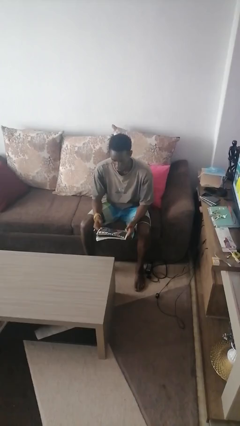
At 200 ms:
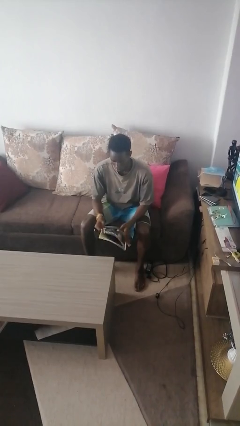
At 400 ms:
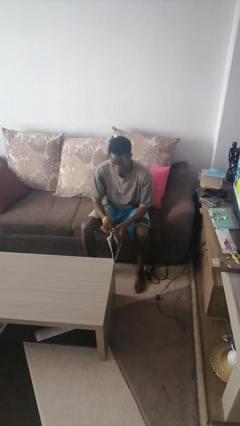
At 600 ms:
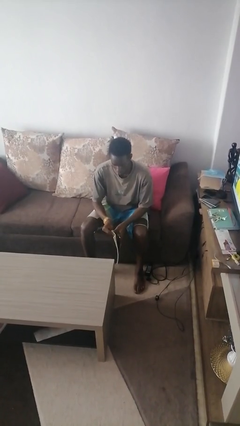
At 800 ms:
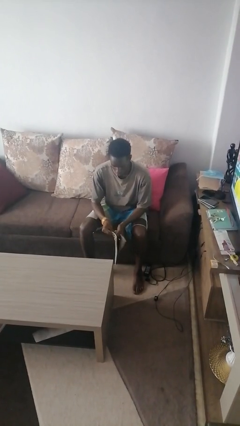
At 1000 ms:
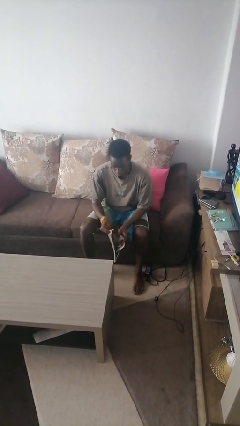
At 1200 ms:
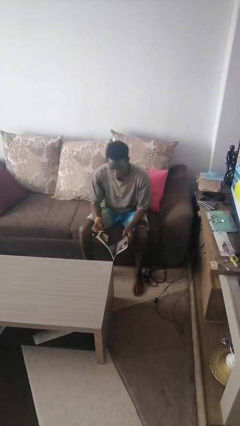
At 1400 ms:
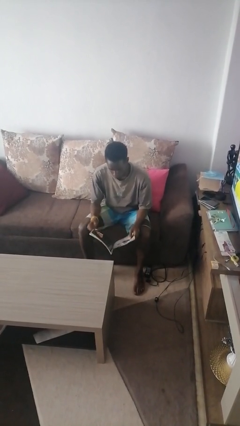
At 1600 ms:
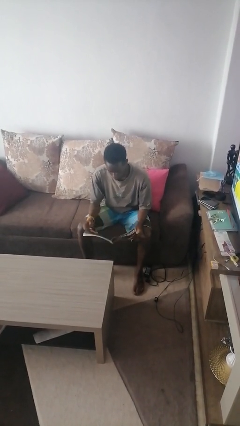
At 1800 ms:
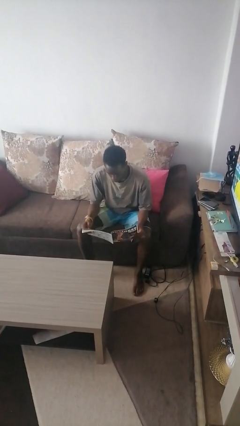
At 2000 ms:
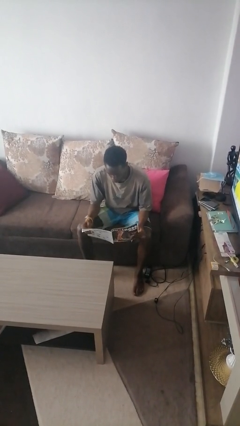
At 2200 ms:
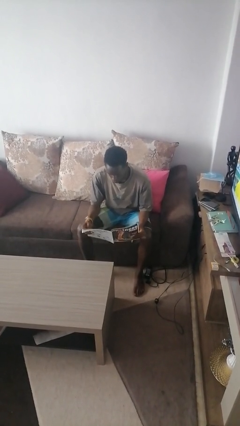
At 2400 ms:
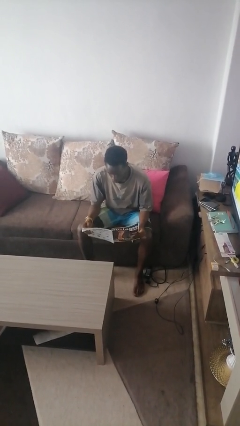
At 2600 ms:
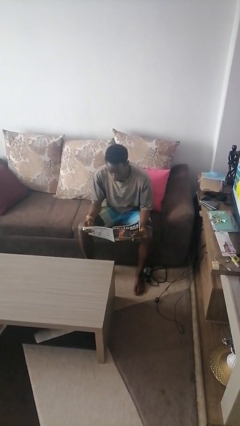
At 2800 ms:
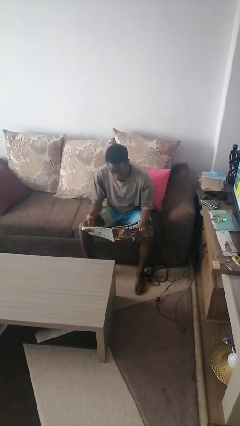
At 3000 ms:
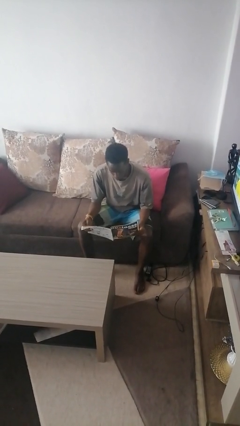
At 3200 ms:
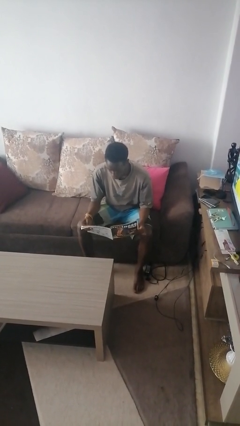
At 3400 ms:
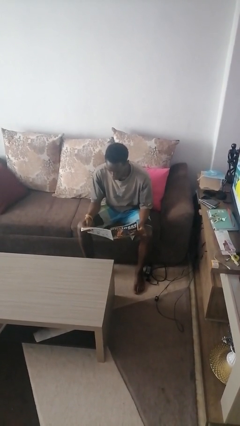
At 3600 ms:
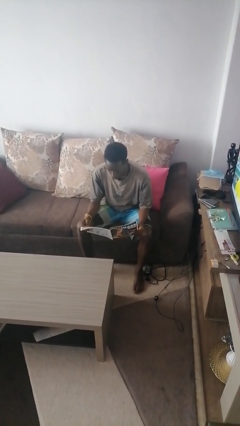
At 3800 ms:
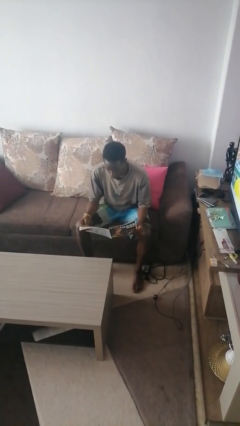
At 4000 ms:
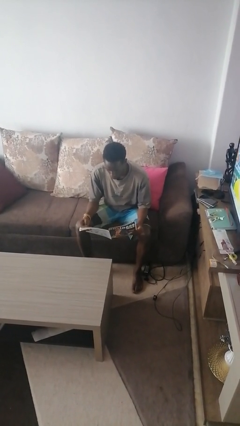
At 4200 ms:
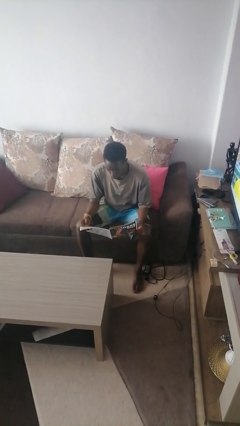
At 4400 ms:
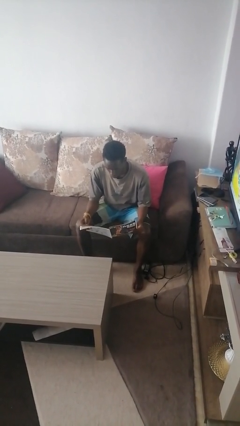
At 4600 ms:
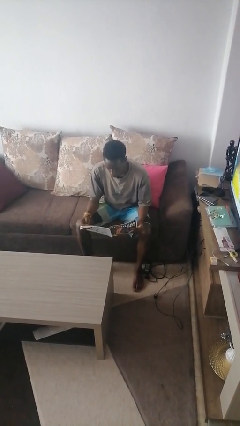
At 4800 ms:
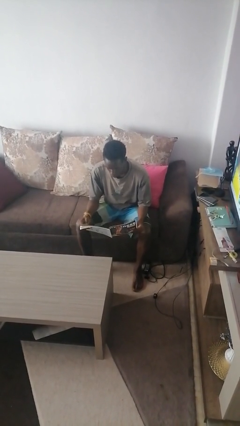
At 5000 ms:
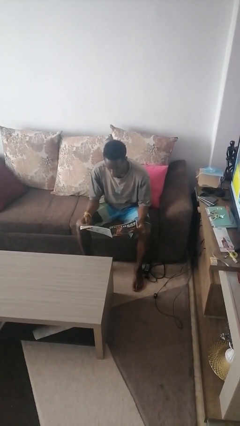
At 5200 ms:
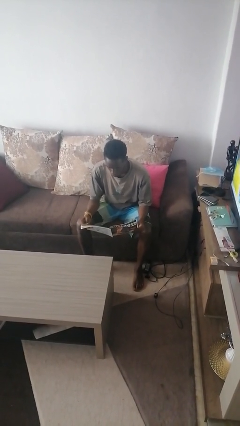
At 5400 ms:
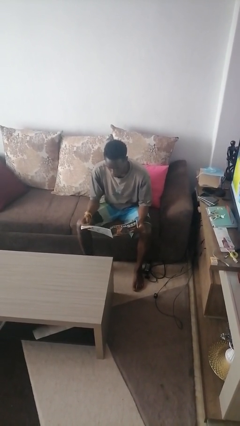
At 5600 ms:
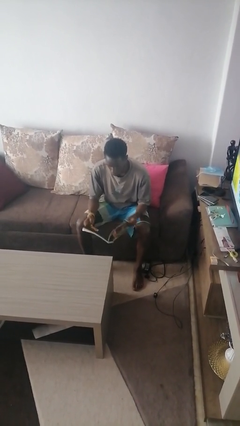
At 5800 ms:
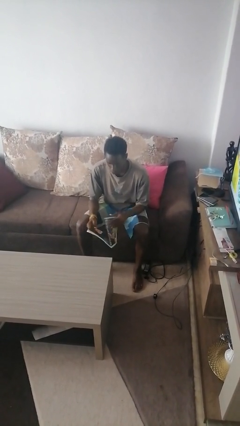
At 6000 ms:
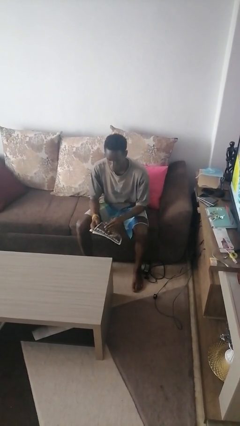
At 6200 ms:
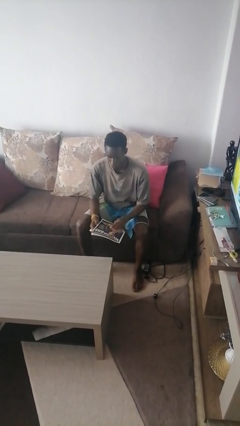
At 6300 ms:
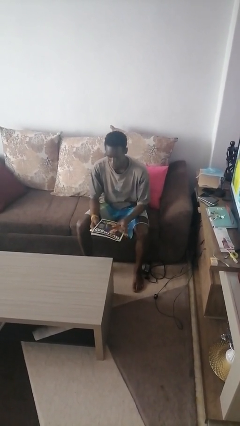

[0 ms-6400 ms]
person reads magazine

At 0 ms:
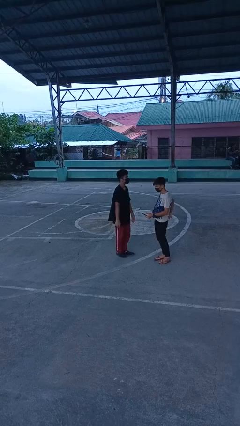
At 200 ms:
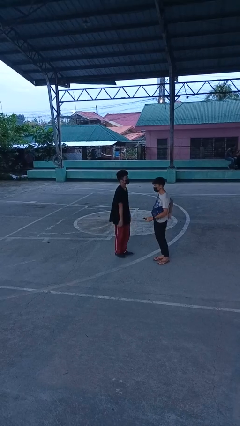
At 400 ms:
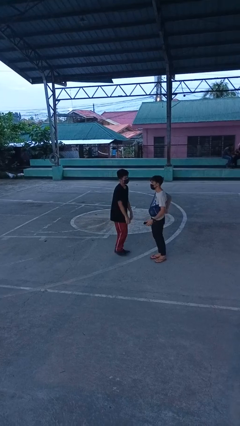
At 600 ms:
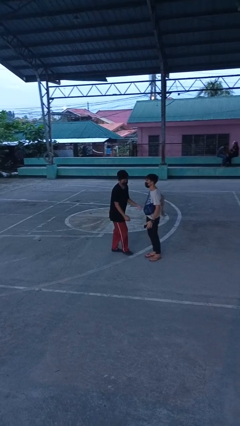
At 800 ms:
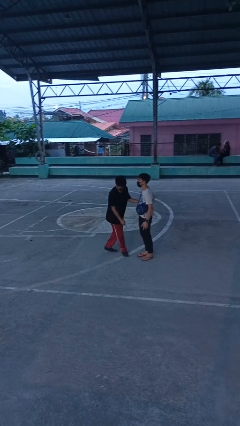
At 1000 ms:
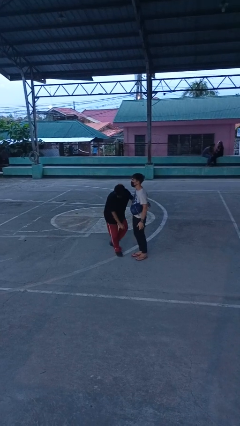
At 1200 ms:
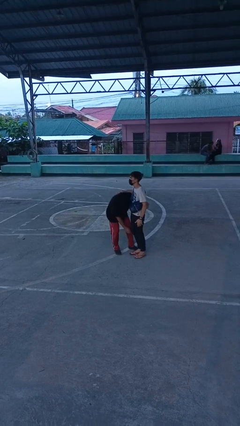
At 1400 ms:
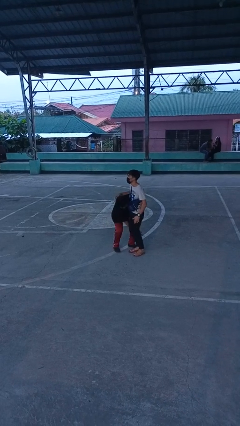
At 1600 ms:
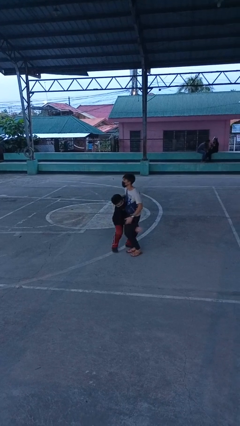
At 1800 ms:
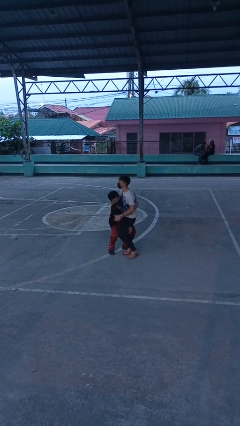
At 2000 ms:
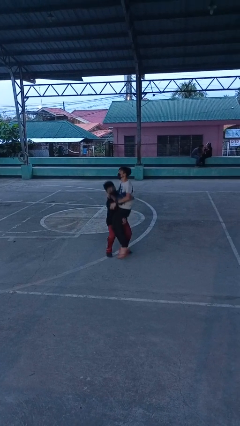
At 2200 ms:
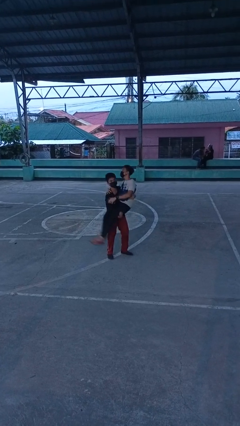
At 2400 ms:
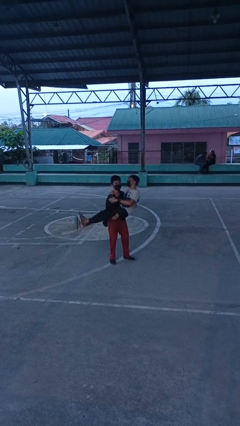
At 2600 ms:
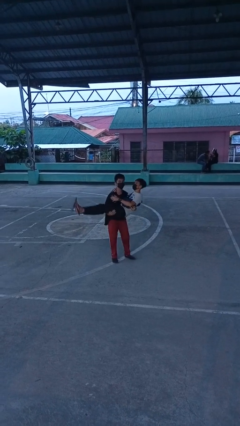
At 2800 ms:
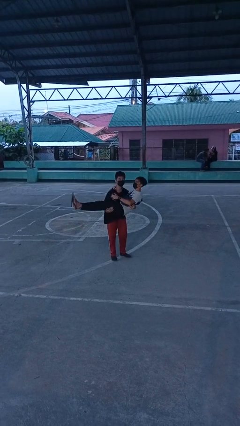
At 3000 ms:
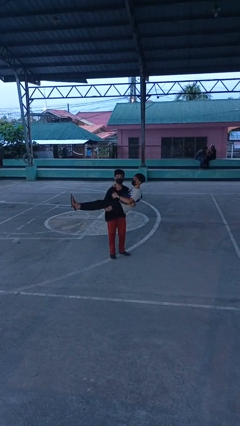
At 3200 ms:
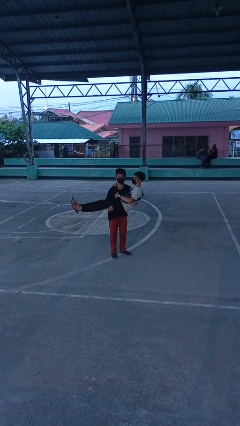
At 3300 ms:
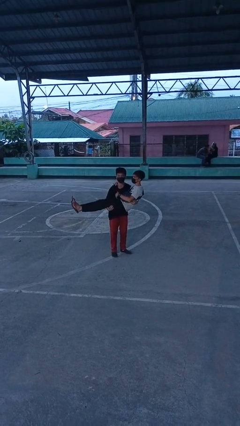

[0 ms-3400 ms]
person picks up person

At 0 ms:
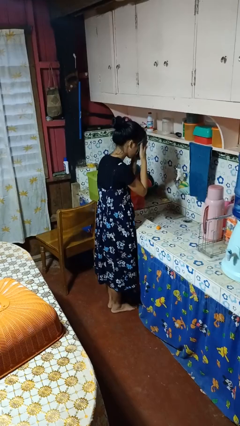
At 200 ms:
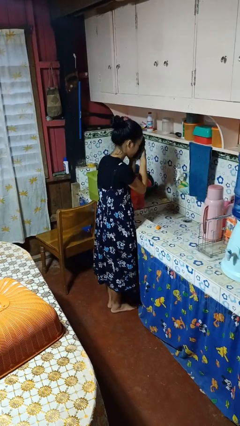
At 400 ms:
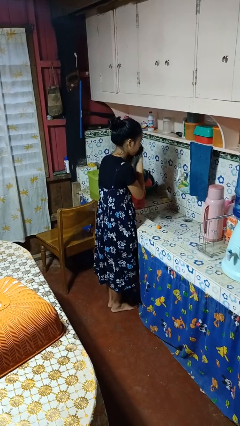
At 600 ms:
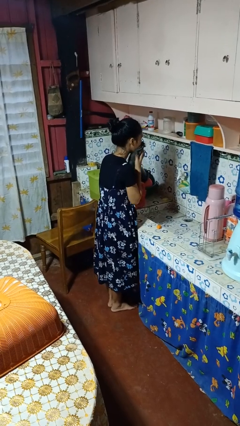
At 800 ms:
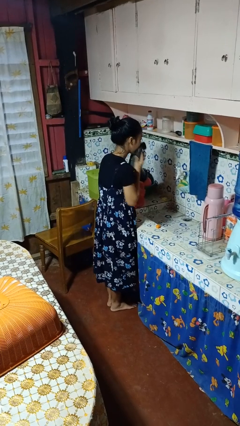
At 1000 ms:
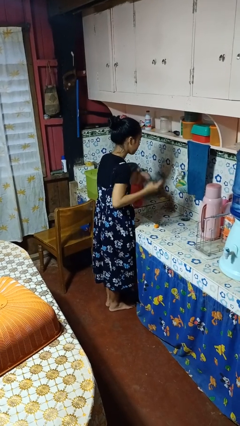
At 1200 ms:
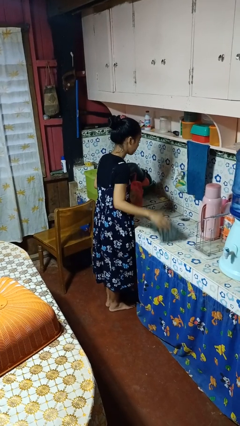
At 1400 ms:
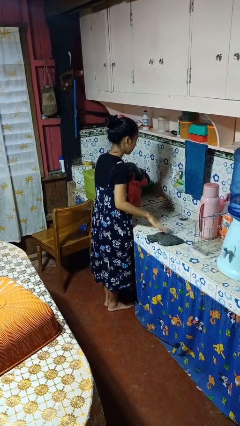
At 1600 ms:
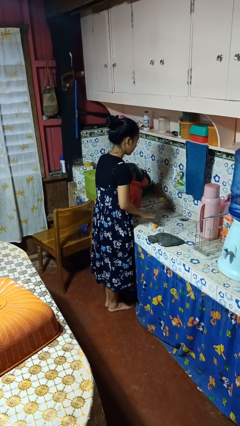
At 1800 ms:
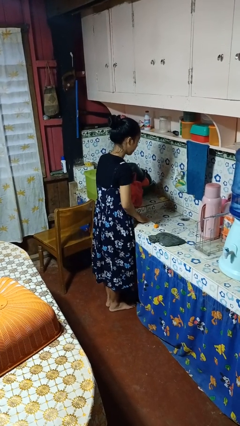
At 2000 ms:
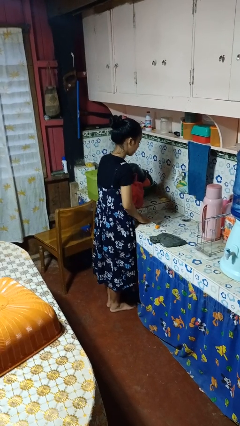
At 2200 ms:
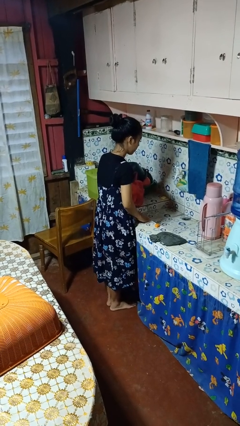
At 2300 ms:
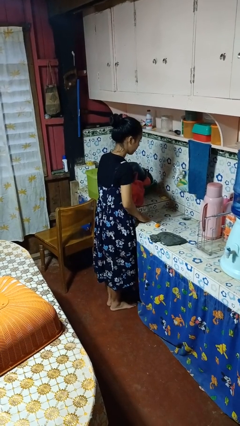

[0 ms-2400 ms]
person dries face with towel

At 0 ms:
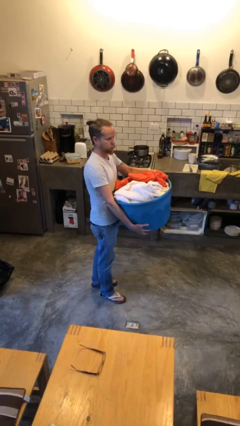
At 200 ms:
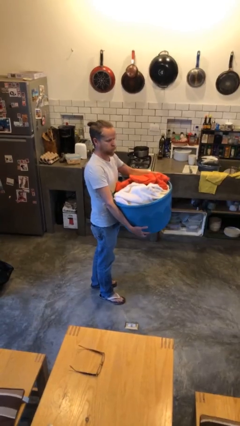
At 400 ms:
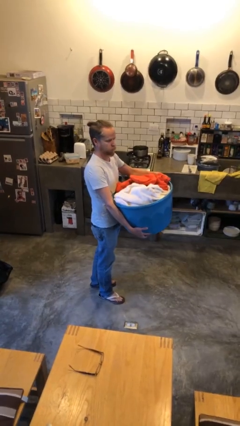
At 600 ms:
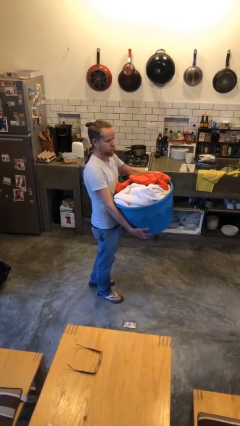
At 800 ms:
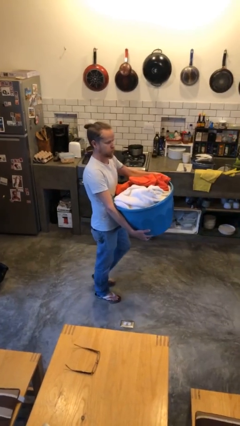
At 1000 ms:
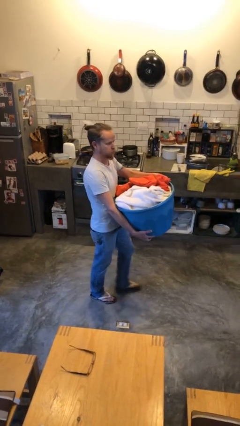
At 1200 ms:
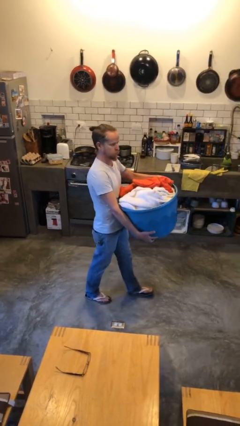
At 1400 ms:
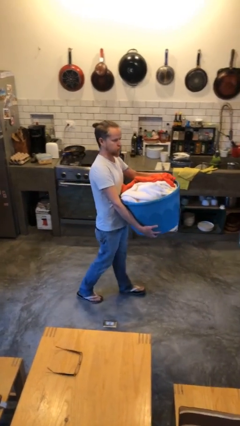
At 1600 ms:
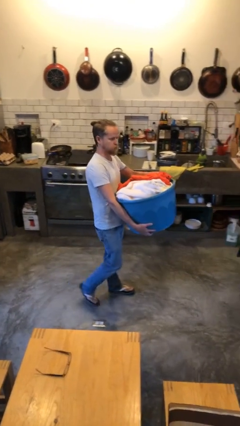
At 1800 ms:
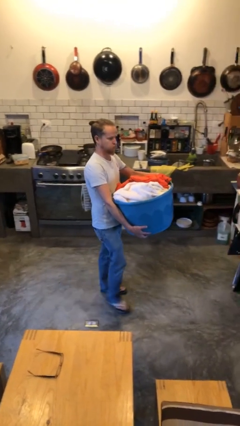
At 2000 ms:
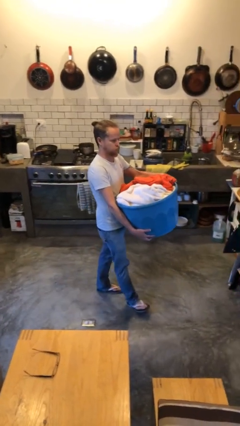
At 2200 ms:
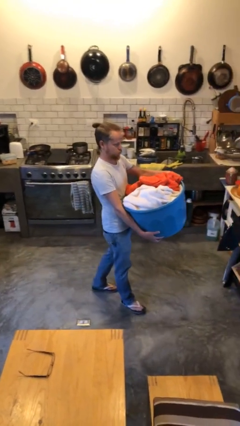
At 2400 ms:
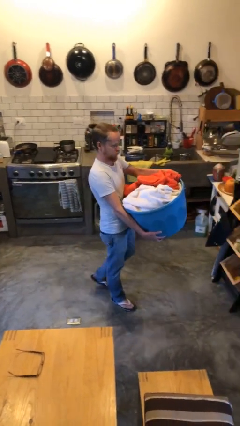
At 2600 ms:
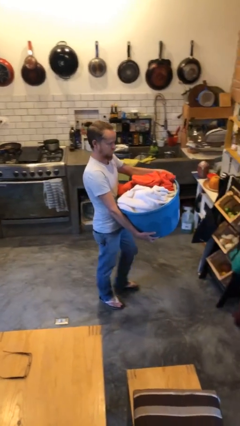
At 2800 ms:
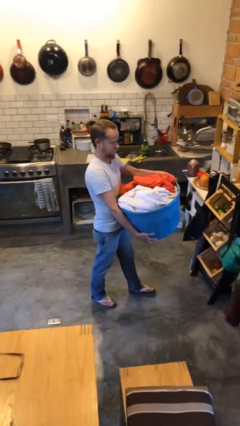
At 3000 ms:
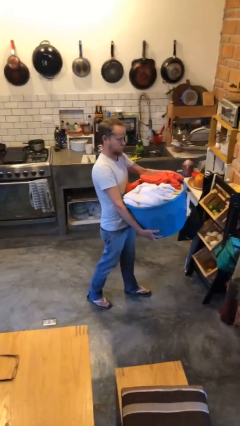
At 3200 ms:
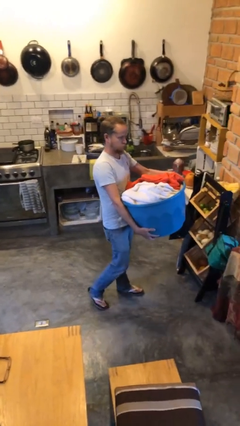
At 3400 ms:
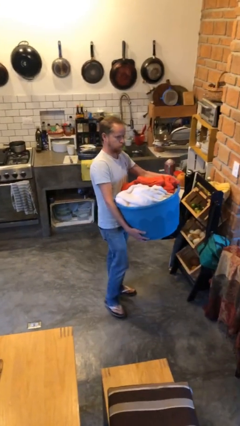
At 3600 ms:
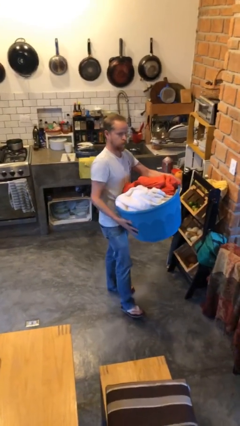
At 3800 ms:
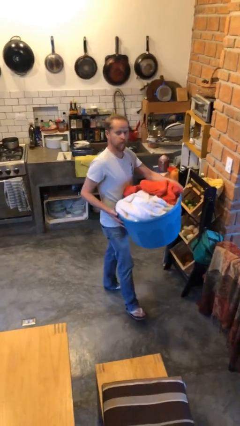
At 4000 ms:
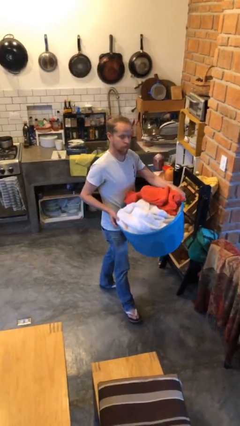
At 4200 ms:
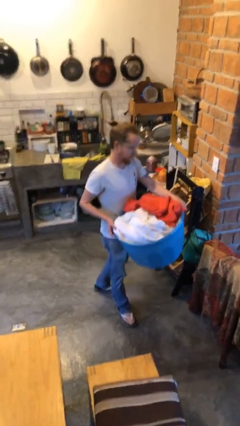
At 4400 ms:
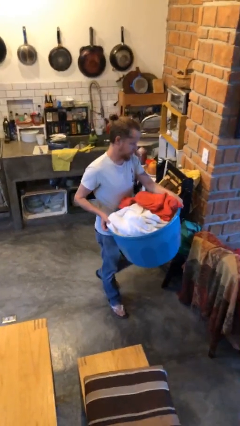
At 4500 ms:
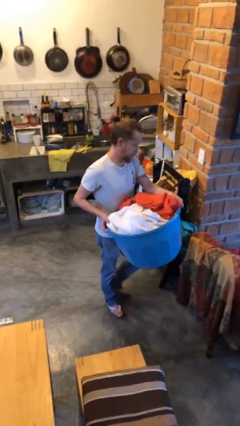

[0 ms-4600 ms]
person carries laundry basket

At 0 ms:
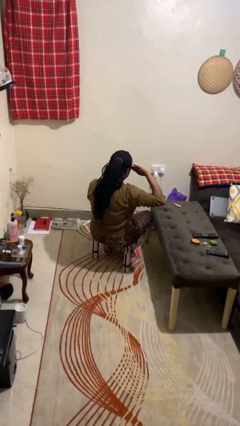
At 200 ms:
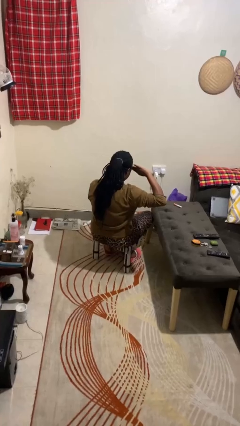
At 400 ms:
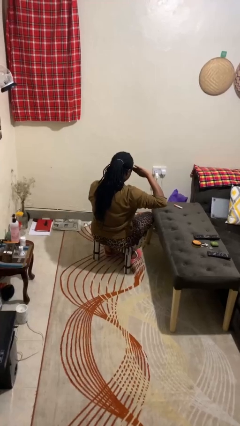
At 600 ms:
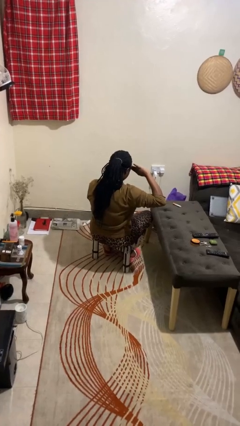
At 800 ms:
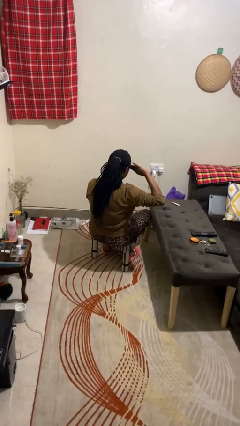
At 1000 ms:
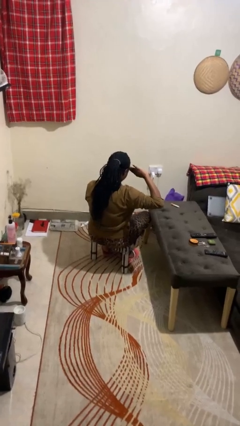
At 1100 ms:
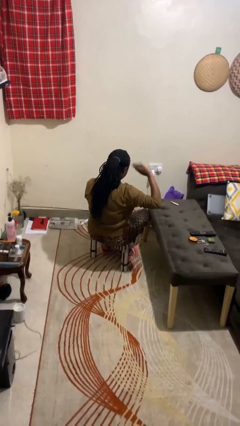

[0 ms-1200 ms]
person salutes
